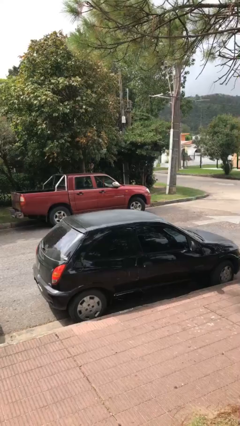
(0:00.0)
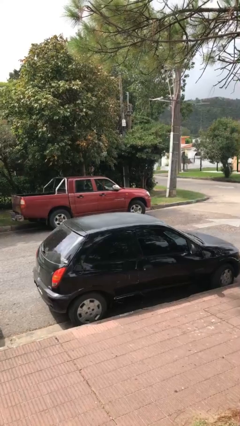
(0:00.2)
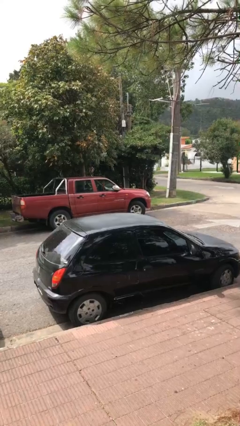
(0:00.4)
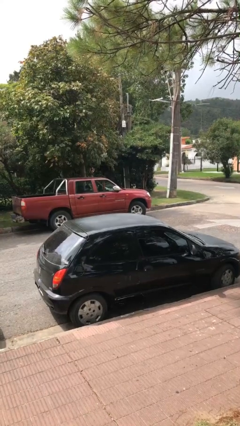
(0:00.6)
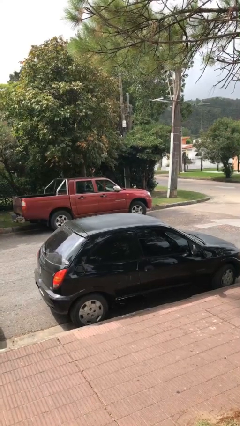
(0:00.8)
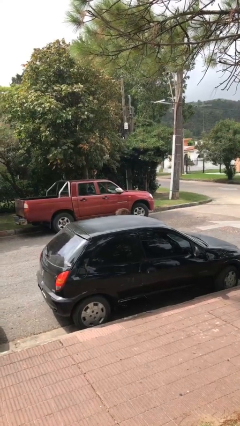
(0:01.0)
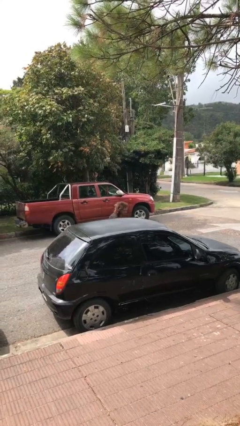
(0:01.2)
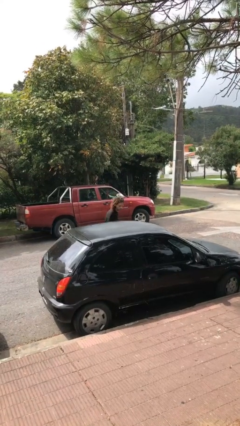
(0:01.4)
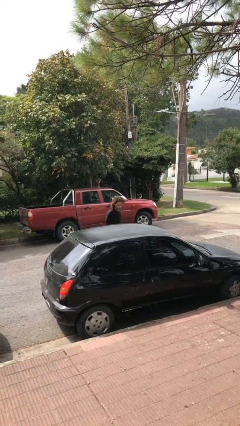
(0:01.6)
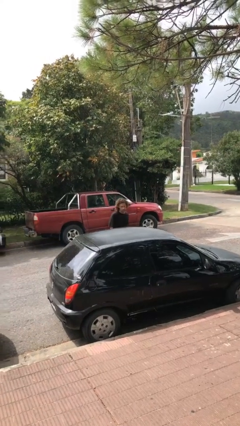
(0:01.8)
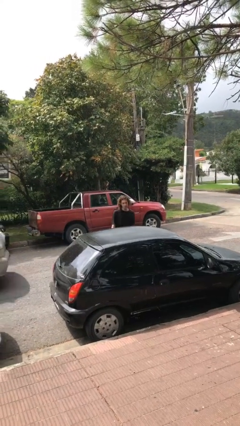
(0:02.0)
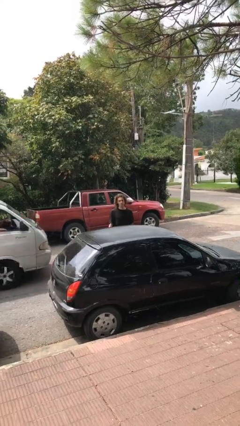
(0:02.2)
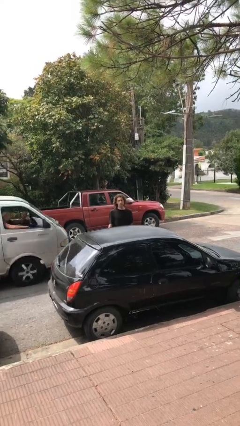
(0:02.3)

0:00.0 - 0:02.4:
person exits car

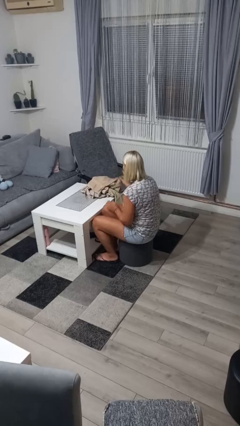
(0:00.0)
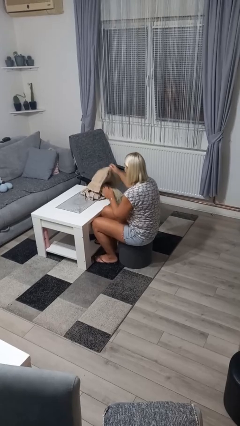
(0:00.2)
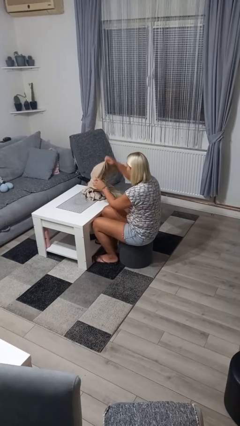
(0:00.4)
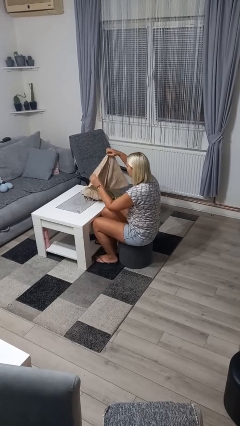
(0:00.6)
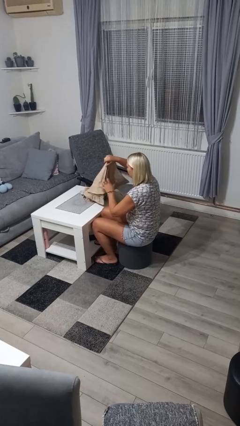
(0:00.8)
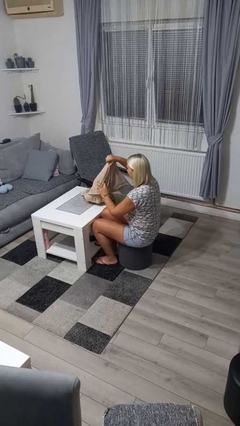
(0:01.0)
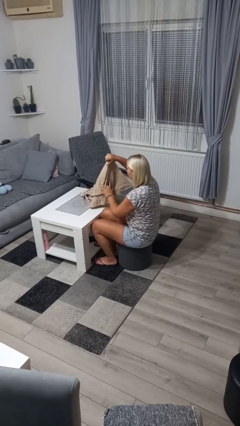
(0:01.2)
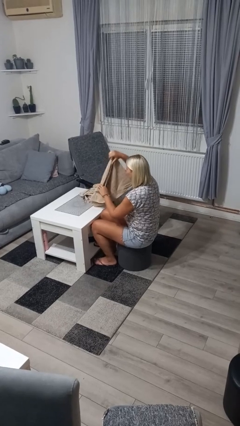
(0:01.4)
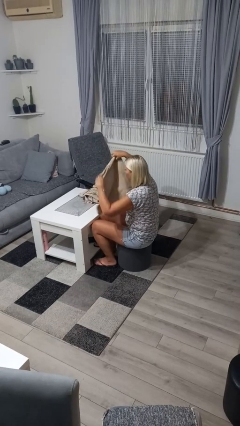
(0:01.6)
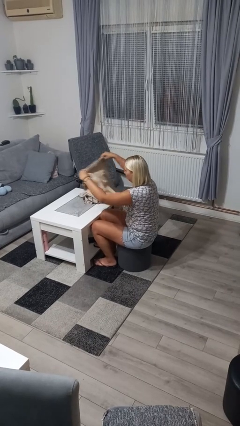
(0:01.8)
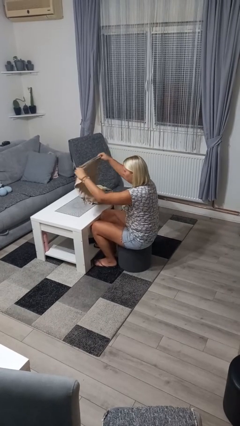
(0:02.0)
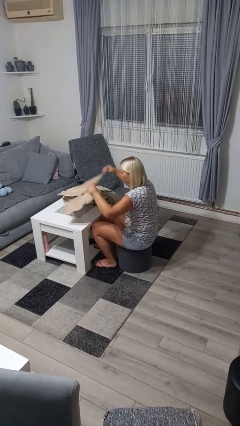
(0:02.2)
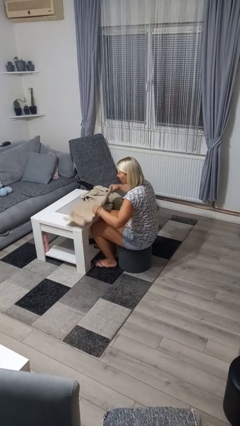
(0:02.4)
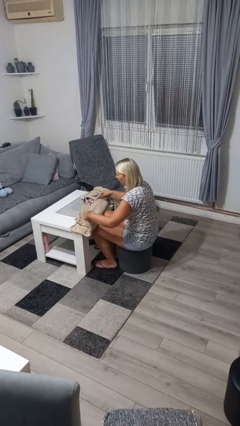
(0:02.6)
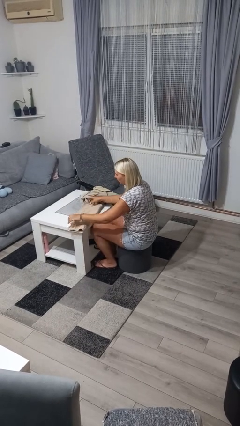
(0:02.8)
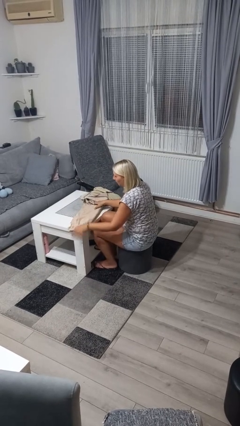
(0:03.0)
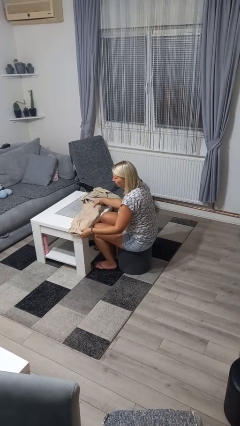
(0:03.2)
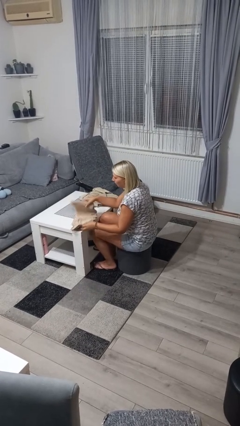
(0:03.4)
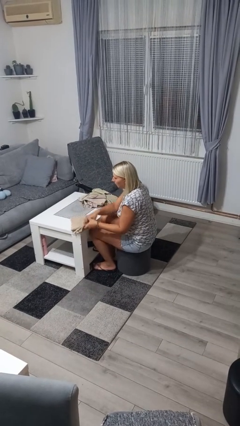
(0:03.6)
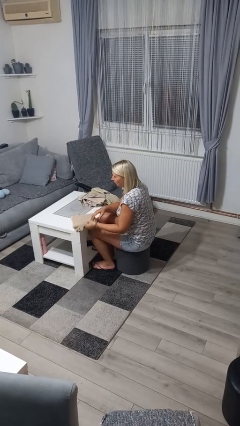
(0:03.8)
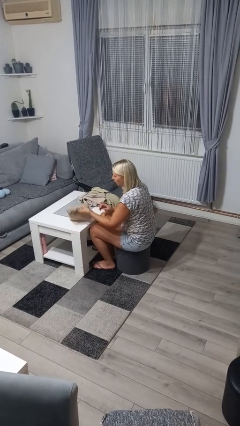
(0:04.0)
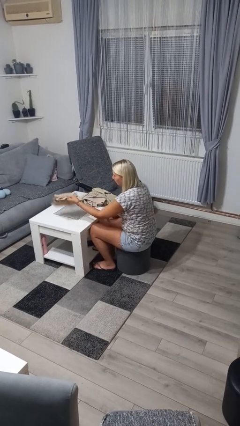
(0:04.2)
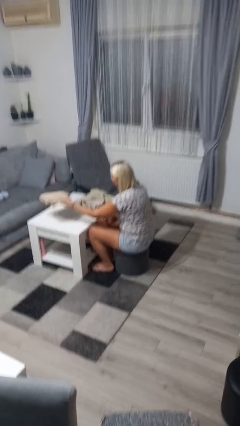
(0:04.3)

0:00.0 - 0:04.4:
person folds towel

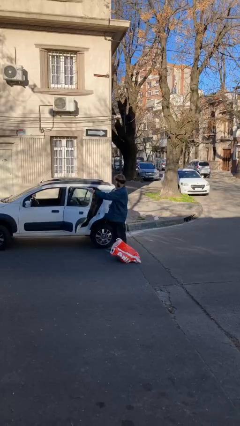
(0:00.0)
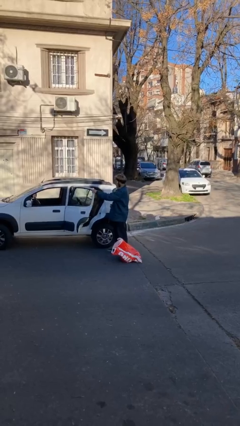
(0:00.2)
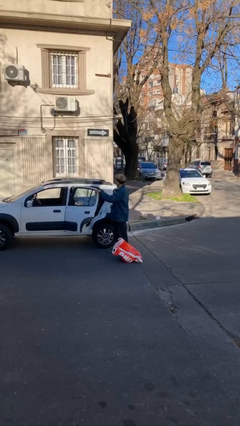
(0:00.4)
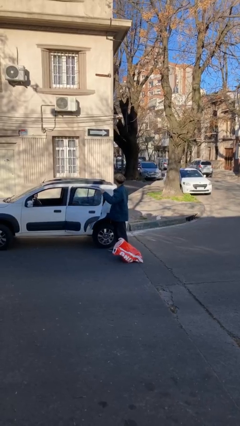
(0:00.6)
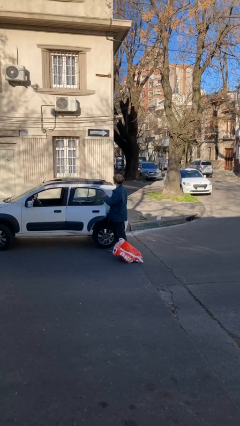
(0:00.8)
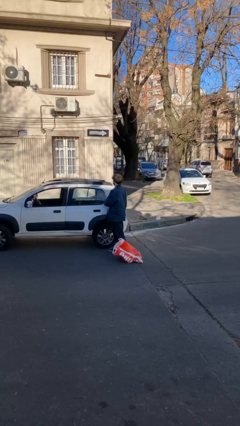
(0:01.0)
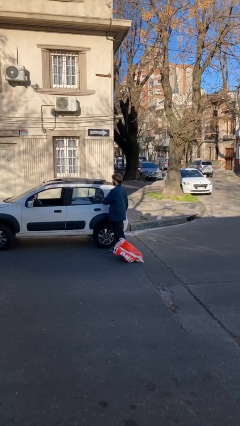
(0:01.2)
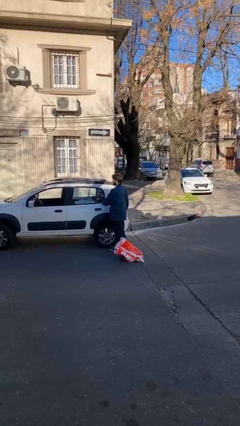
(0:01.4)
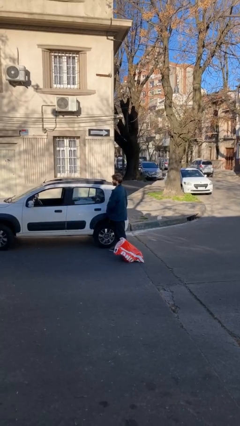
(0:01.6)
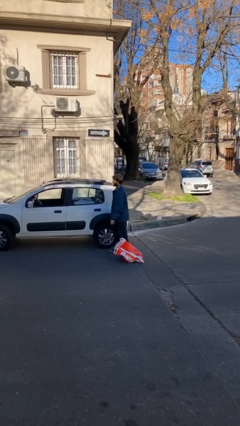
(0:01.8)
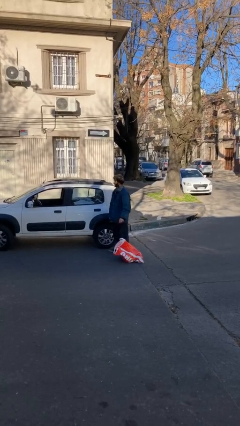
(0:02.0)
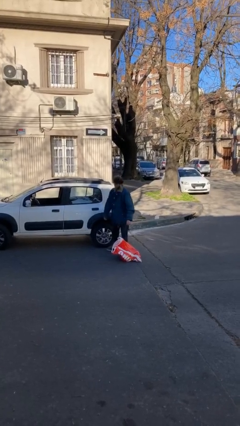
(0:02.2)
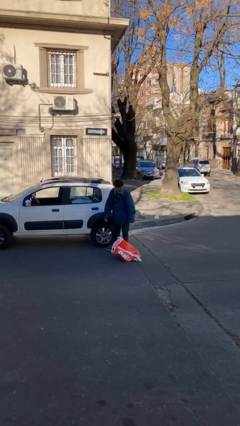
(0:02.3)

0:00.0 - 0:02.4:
person closes car door

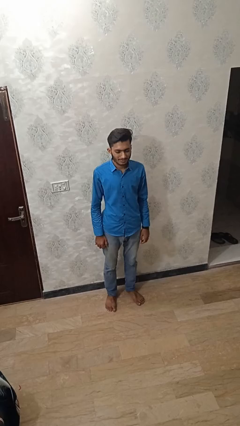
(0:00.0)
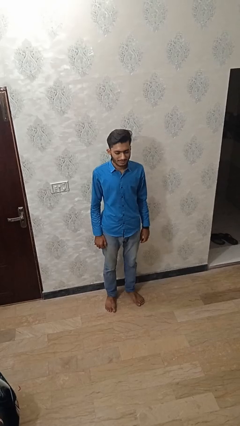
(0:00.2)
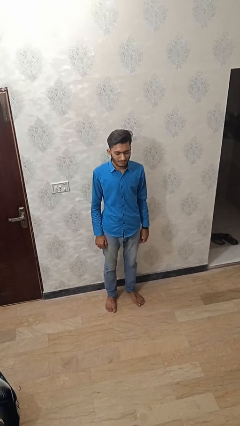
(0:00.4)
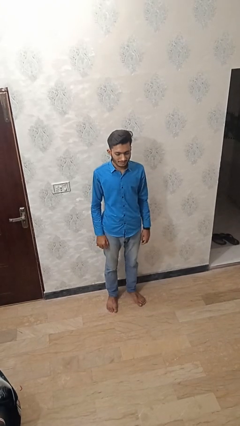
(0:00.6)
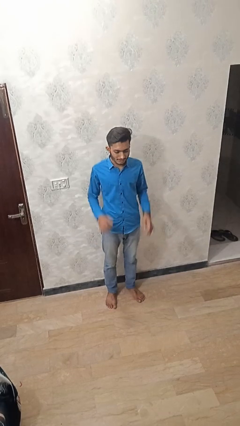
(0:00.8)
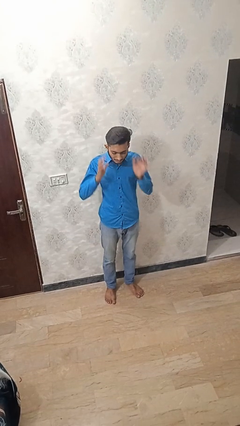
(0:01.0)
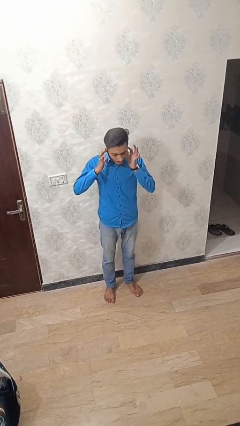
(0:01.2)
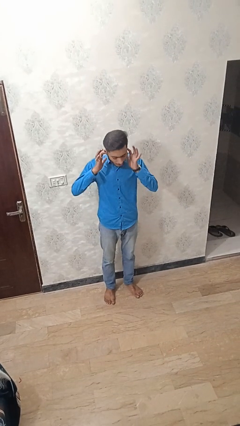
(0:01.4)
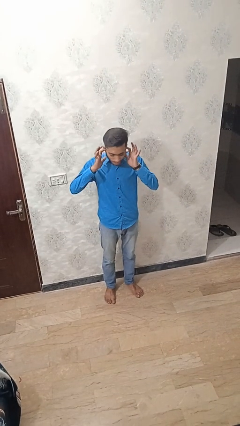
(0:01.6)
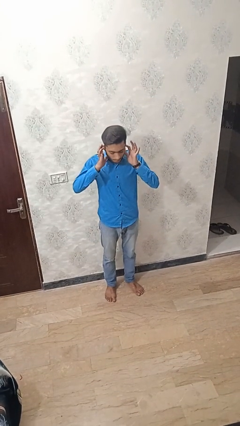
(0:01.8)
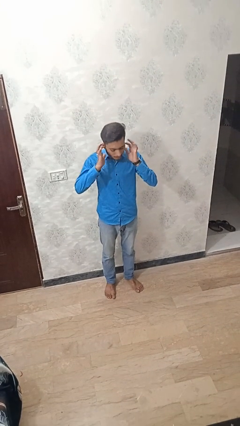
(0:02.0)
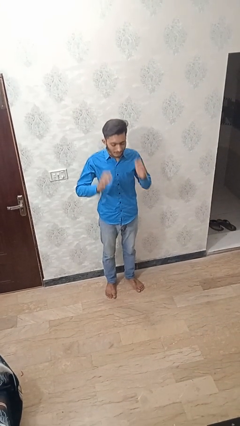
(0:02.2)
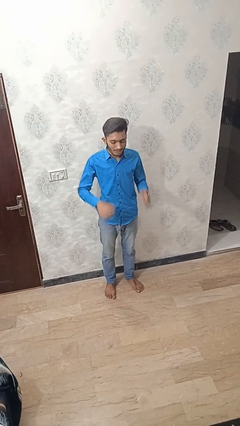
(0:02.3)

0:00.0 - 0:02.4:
person puts fingers in ear

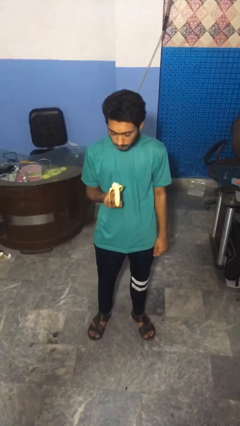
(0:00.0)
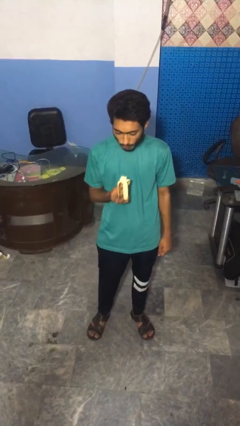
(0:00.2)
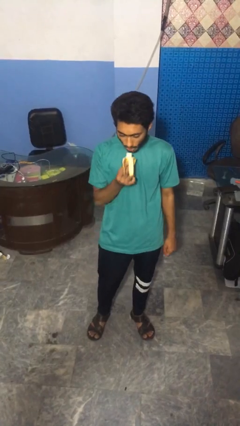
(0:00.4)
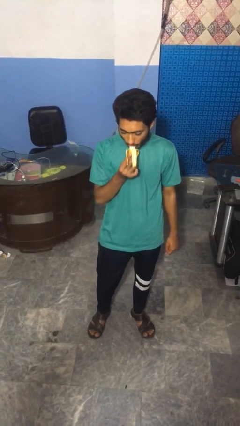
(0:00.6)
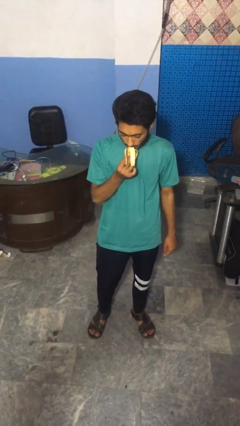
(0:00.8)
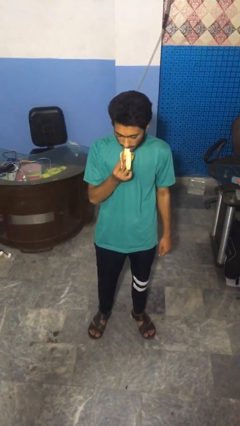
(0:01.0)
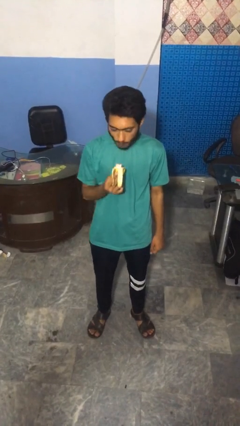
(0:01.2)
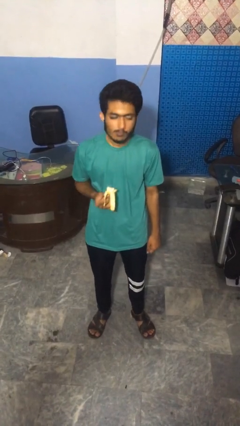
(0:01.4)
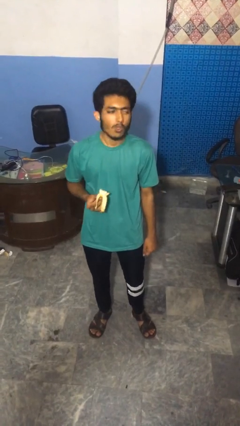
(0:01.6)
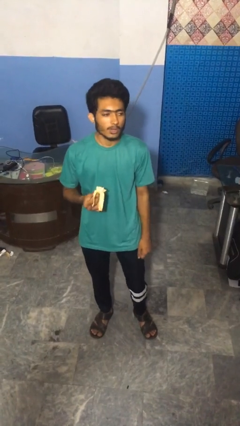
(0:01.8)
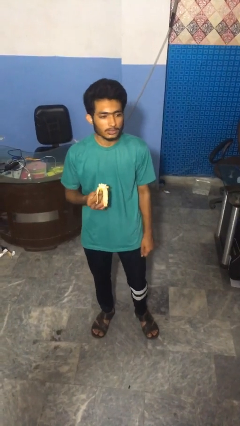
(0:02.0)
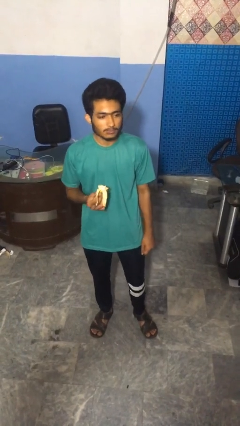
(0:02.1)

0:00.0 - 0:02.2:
person eats banana

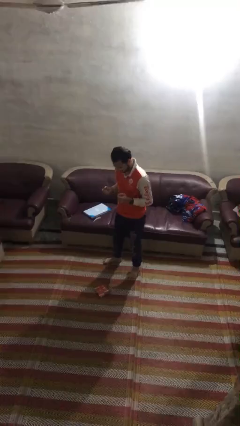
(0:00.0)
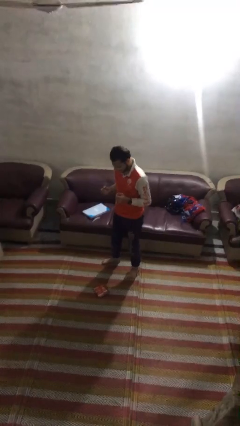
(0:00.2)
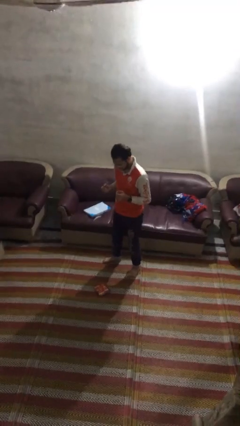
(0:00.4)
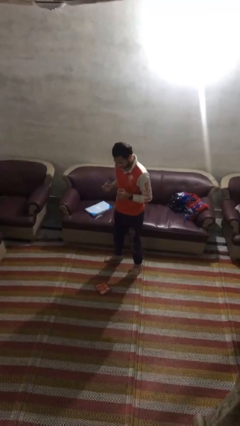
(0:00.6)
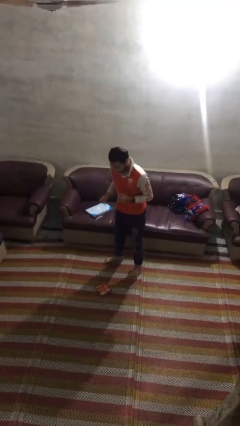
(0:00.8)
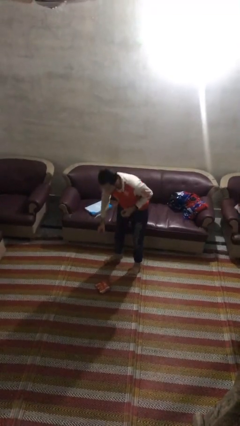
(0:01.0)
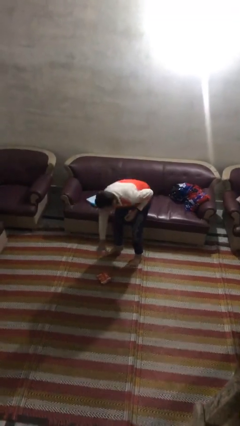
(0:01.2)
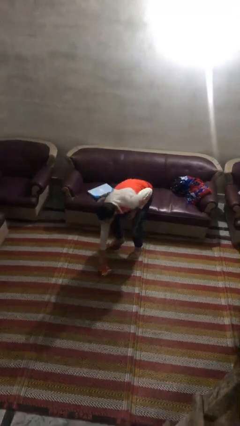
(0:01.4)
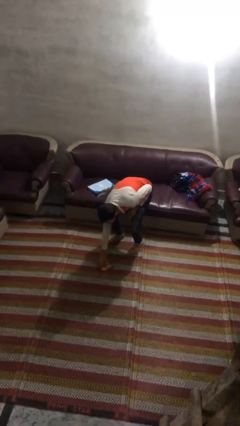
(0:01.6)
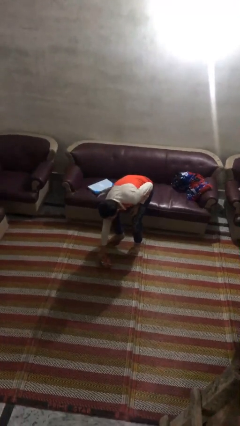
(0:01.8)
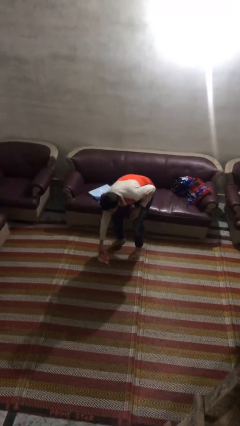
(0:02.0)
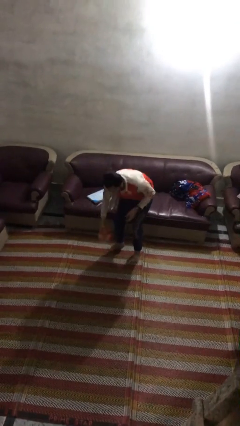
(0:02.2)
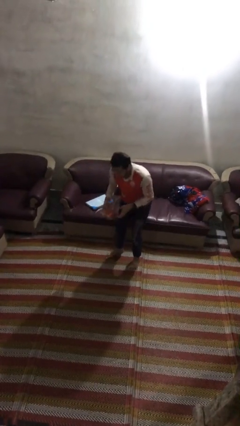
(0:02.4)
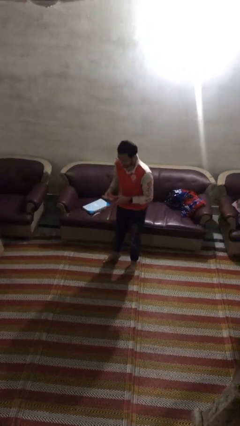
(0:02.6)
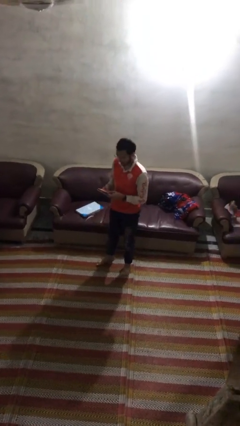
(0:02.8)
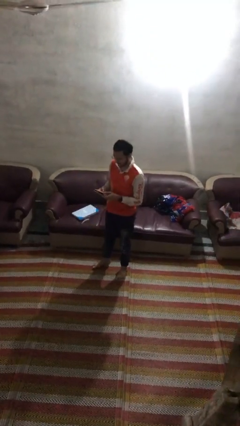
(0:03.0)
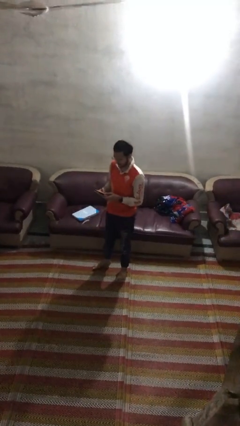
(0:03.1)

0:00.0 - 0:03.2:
person picks up object from floor

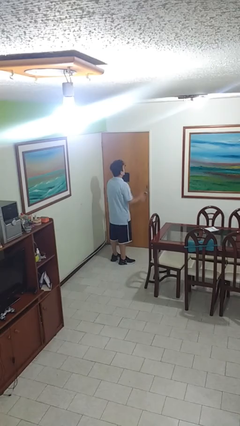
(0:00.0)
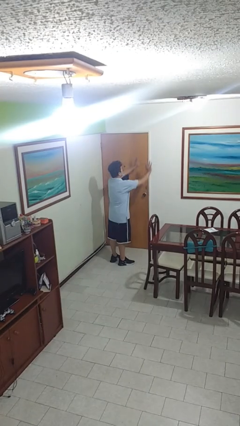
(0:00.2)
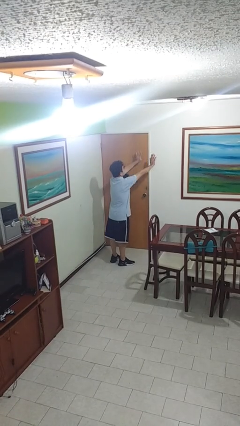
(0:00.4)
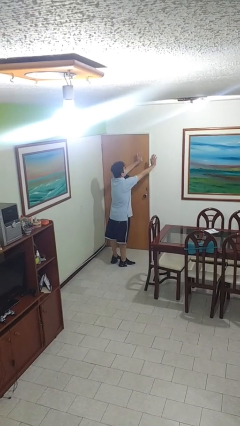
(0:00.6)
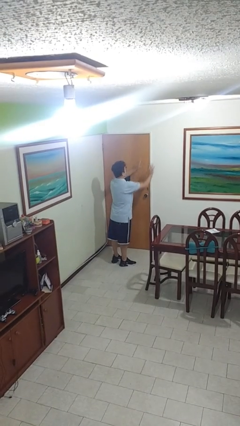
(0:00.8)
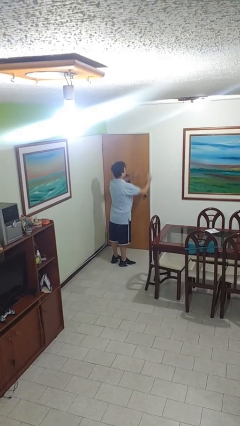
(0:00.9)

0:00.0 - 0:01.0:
person gestures stop
